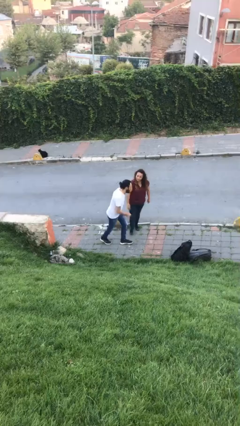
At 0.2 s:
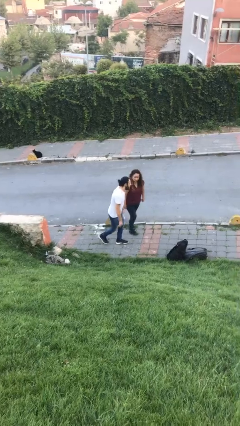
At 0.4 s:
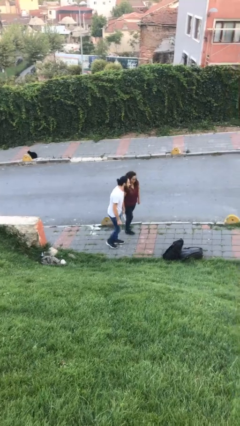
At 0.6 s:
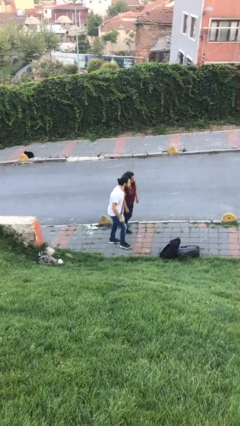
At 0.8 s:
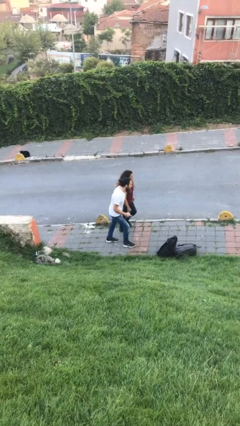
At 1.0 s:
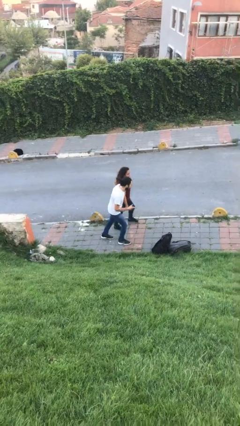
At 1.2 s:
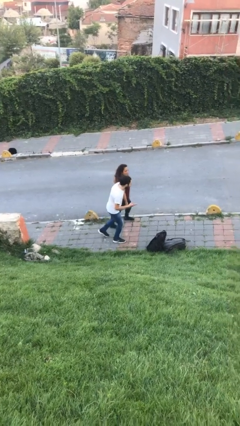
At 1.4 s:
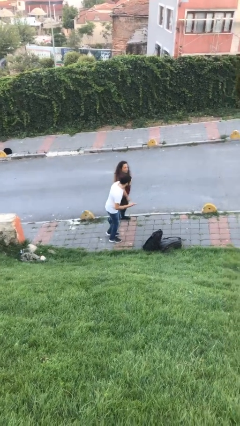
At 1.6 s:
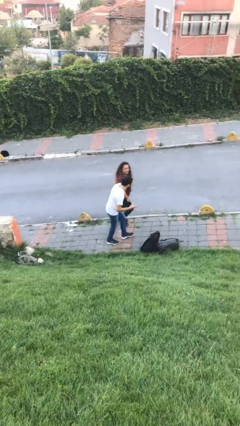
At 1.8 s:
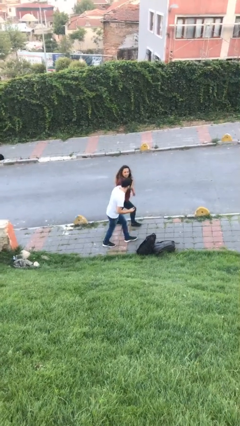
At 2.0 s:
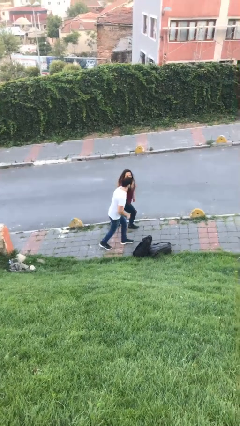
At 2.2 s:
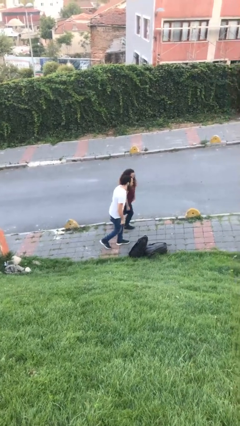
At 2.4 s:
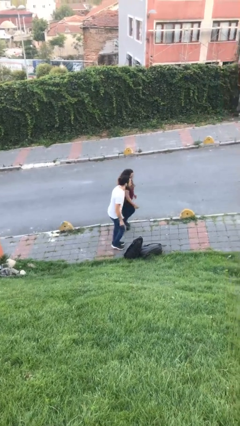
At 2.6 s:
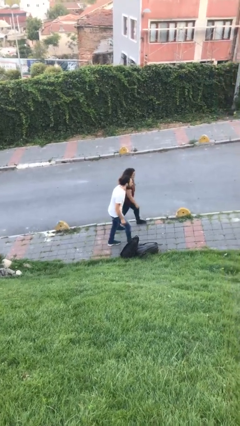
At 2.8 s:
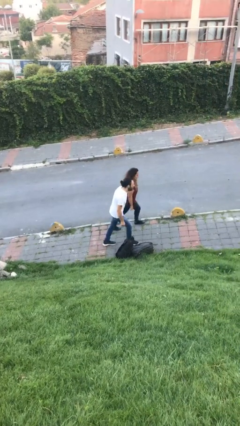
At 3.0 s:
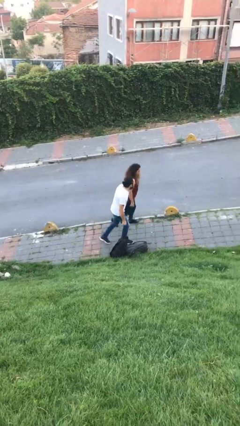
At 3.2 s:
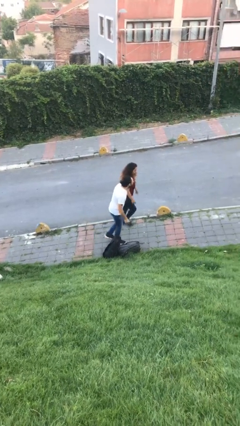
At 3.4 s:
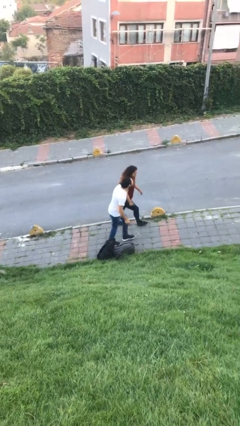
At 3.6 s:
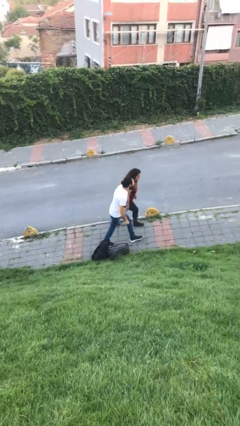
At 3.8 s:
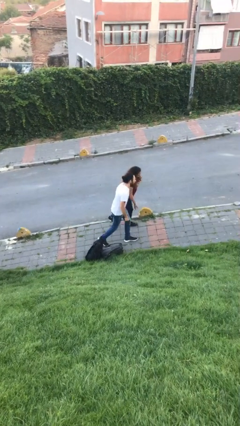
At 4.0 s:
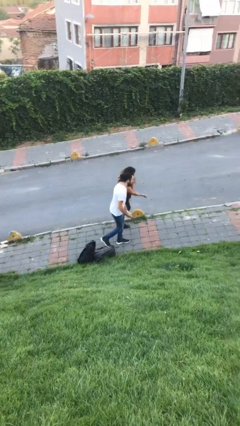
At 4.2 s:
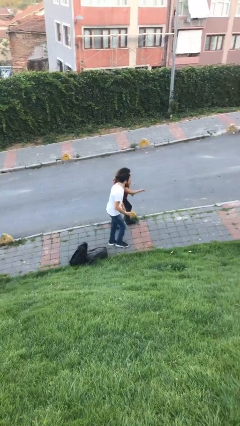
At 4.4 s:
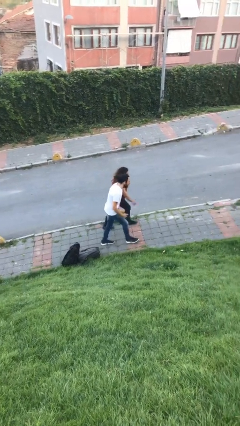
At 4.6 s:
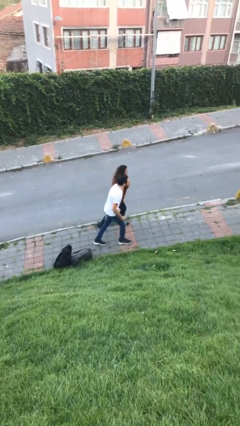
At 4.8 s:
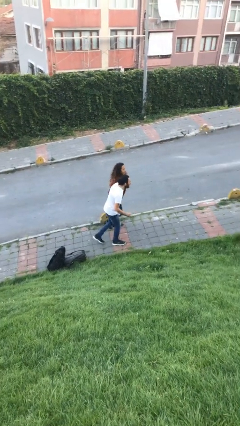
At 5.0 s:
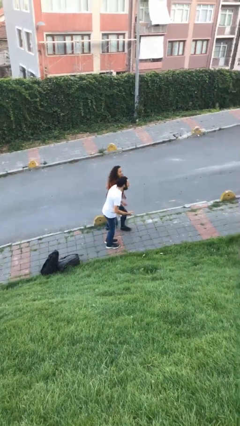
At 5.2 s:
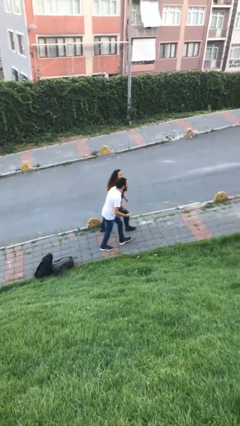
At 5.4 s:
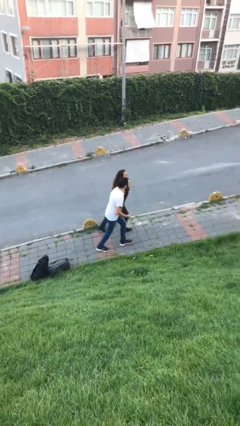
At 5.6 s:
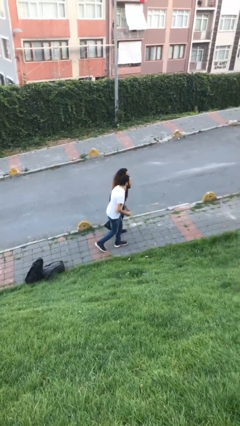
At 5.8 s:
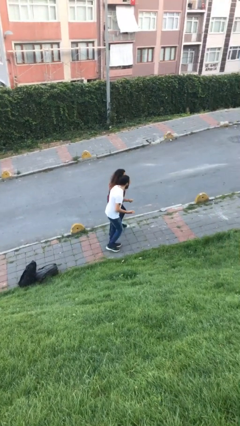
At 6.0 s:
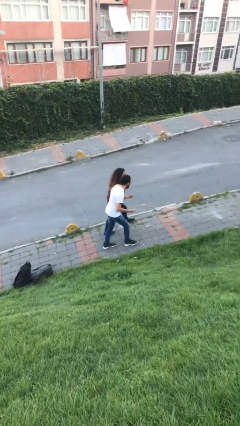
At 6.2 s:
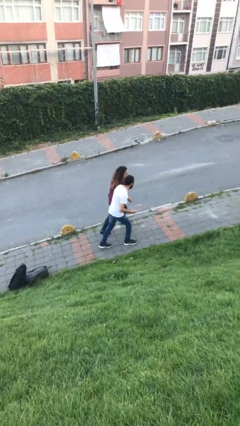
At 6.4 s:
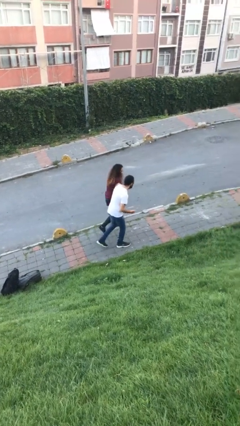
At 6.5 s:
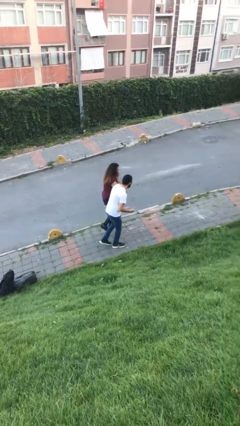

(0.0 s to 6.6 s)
person talks to person

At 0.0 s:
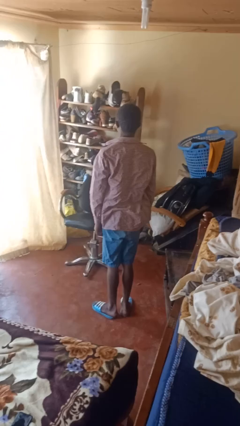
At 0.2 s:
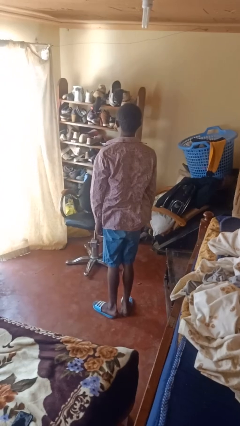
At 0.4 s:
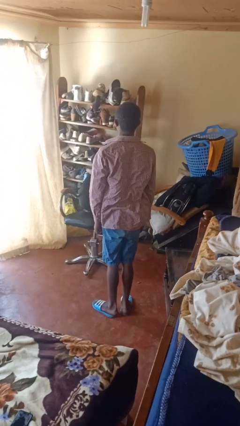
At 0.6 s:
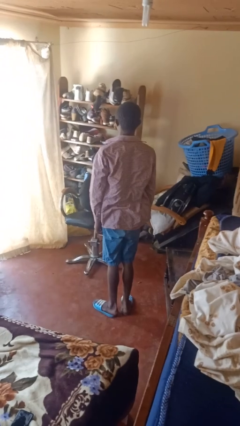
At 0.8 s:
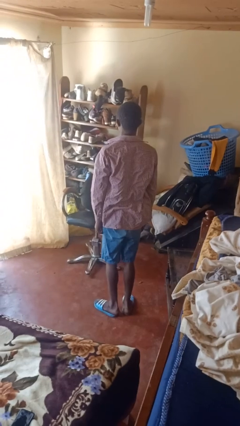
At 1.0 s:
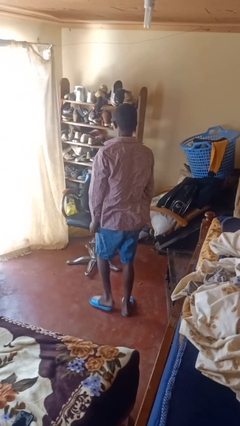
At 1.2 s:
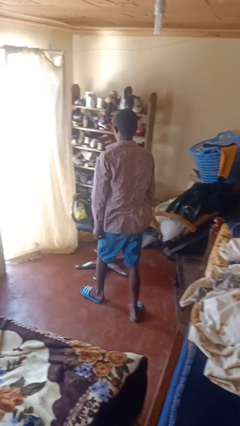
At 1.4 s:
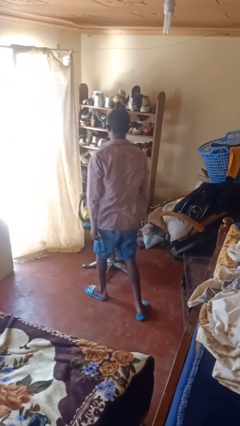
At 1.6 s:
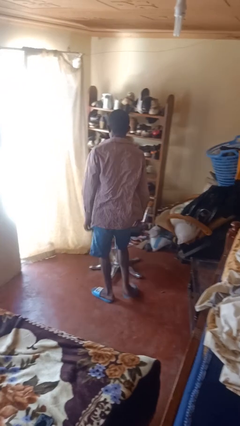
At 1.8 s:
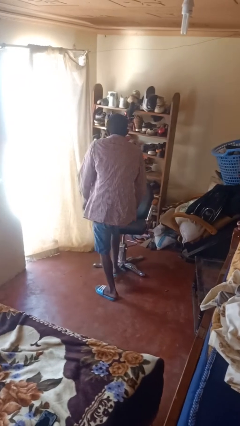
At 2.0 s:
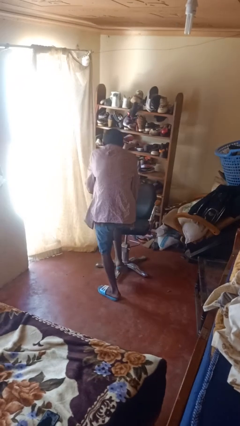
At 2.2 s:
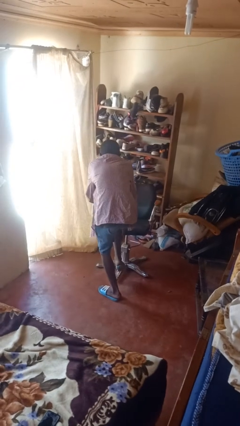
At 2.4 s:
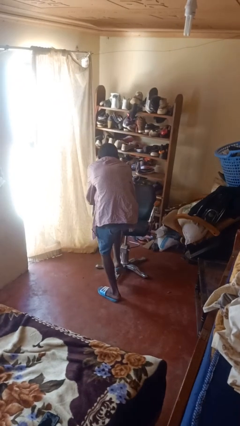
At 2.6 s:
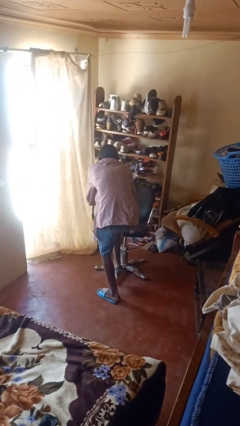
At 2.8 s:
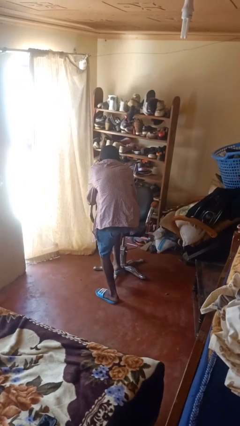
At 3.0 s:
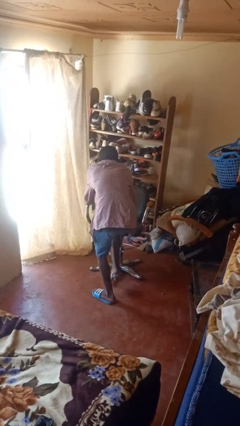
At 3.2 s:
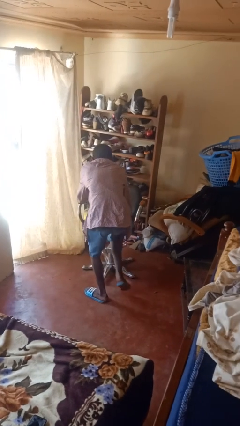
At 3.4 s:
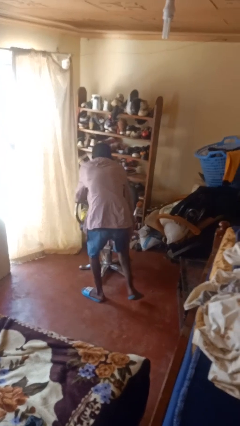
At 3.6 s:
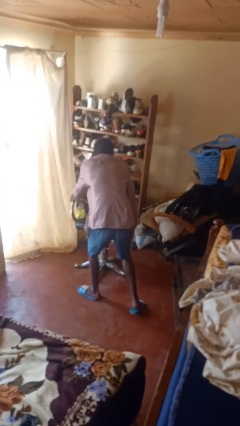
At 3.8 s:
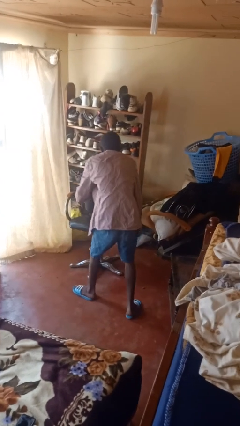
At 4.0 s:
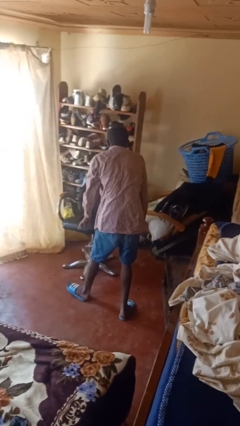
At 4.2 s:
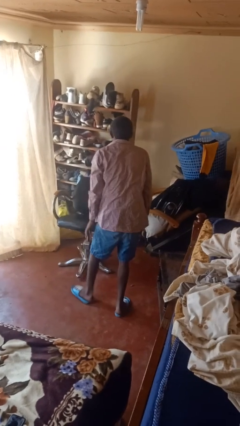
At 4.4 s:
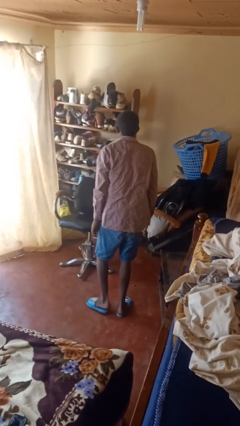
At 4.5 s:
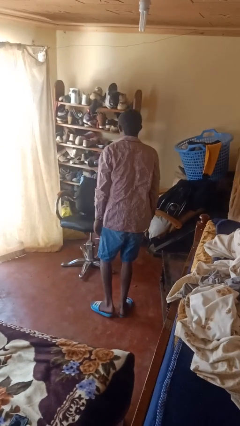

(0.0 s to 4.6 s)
person stubs toe

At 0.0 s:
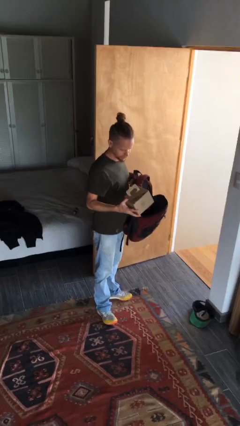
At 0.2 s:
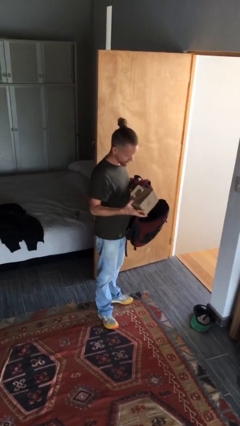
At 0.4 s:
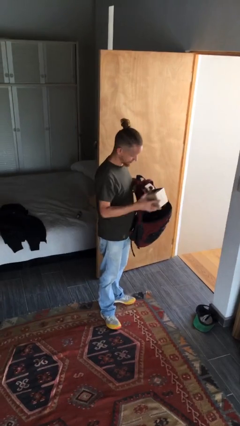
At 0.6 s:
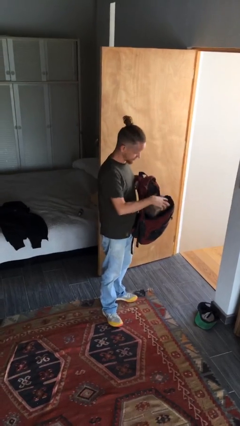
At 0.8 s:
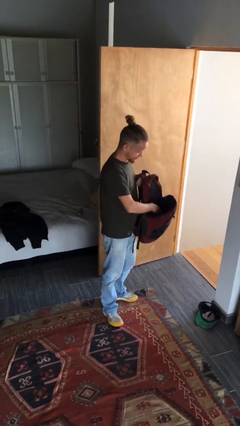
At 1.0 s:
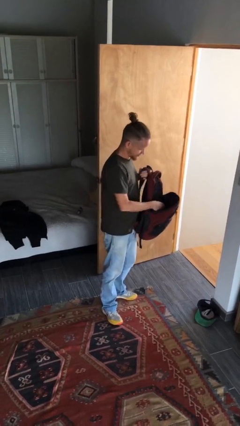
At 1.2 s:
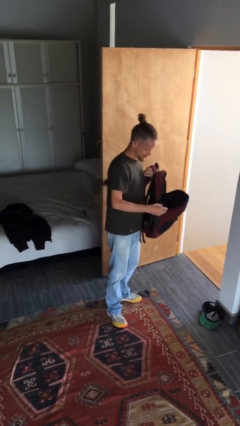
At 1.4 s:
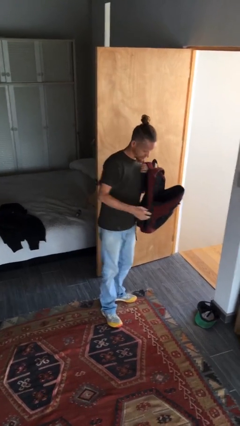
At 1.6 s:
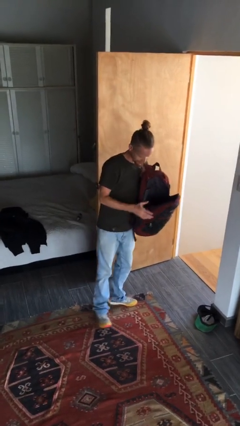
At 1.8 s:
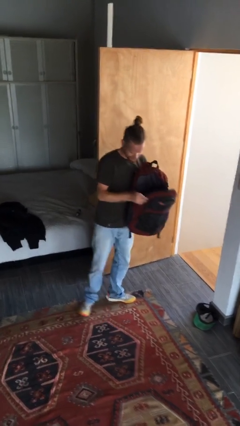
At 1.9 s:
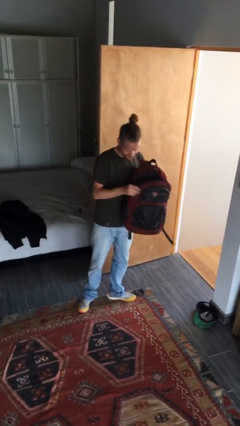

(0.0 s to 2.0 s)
person puts object into backpack

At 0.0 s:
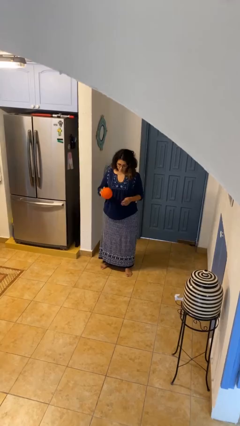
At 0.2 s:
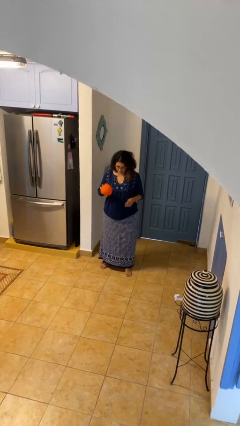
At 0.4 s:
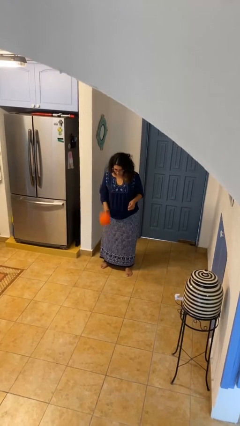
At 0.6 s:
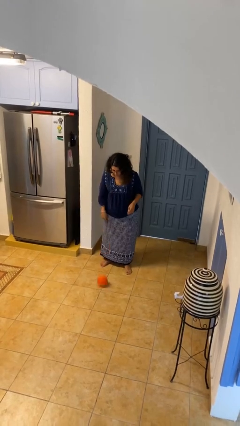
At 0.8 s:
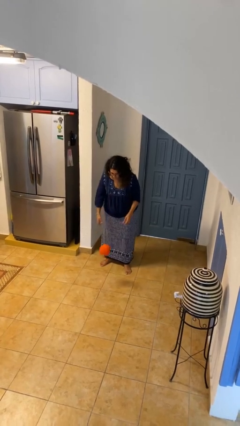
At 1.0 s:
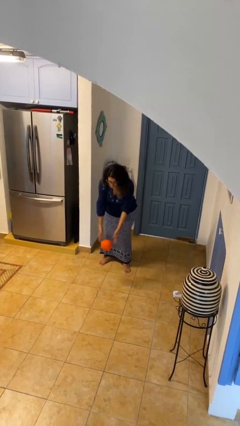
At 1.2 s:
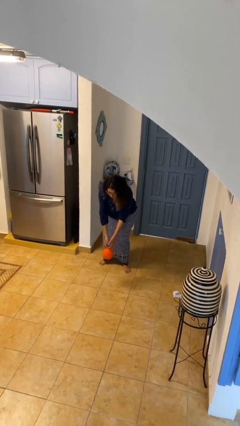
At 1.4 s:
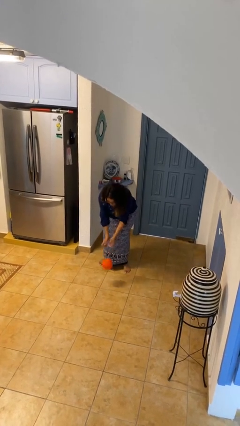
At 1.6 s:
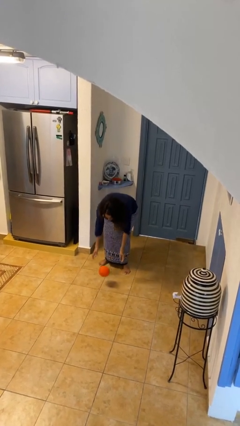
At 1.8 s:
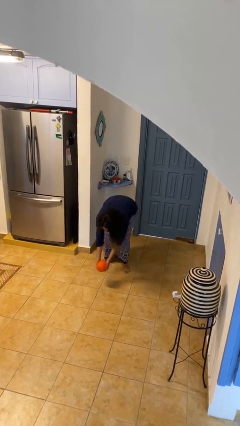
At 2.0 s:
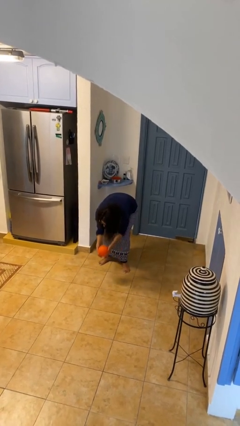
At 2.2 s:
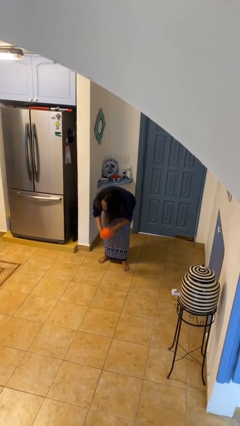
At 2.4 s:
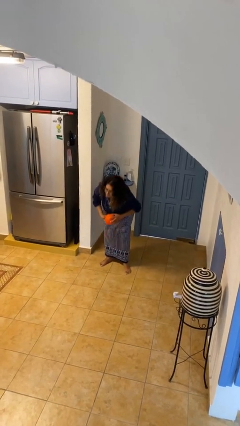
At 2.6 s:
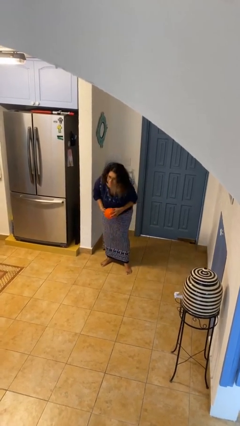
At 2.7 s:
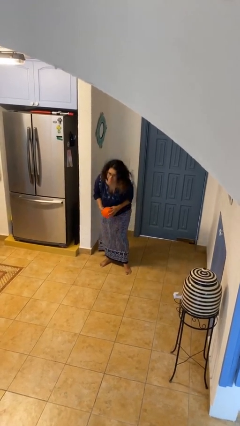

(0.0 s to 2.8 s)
person bounces ball on floor

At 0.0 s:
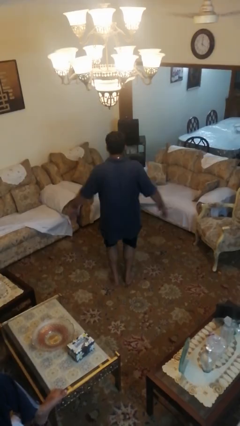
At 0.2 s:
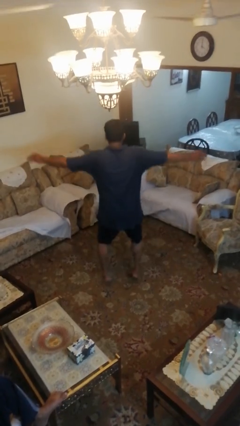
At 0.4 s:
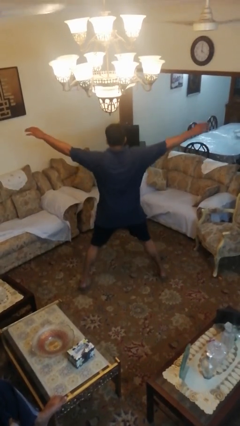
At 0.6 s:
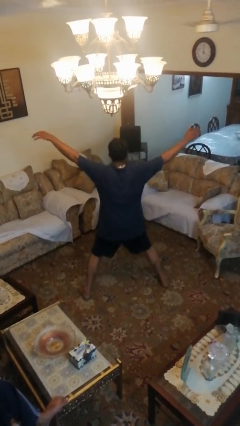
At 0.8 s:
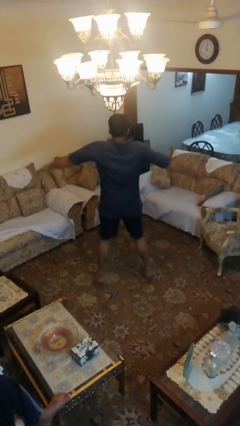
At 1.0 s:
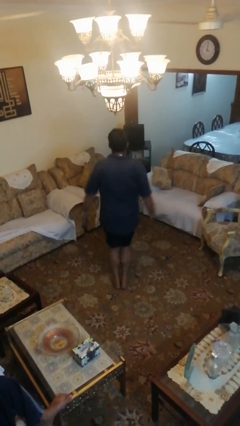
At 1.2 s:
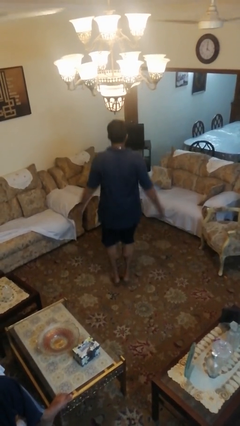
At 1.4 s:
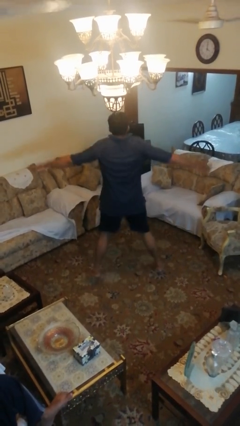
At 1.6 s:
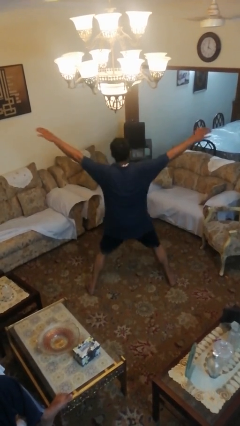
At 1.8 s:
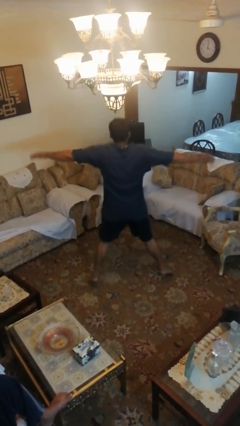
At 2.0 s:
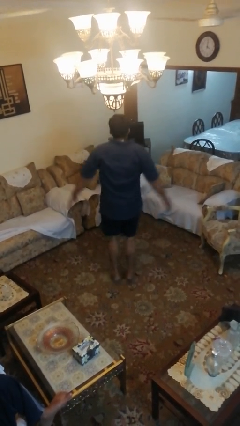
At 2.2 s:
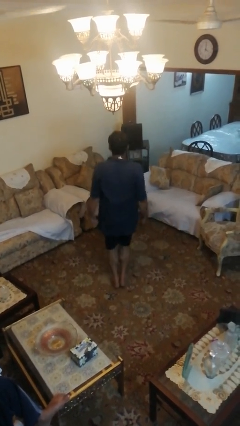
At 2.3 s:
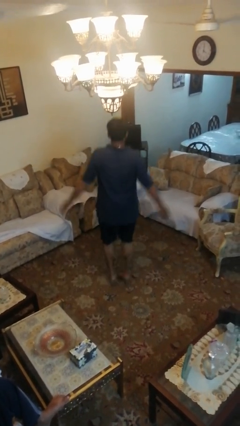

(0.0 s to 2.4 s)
person exercises with jumping jacks
